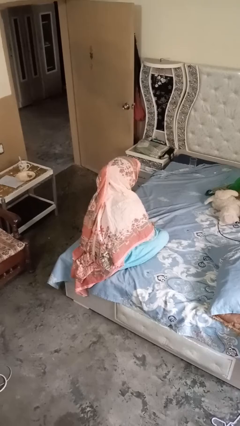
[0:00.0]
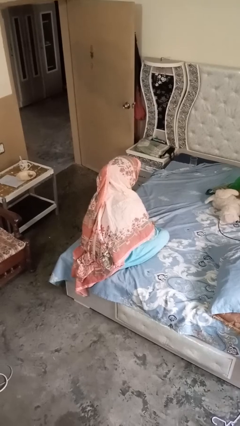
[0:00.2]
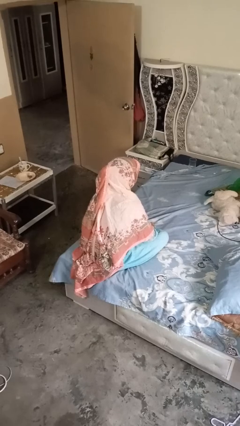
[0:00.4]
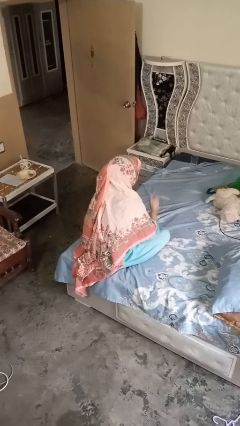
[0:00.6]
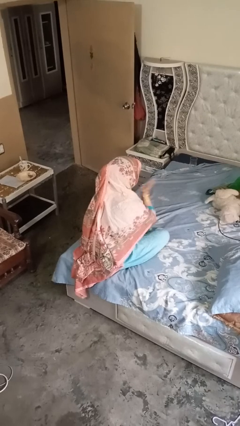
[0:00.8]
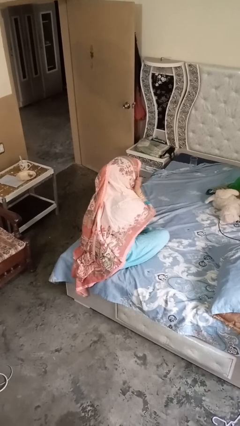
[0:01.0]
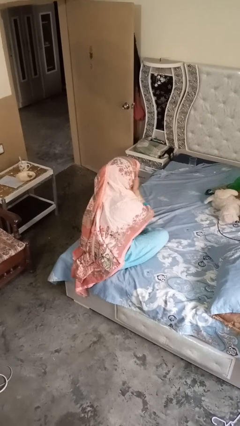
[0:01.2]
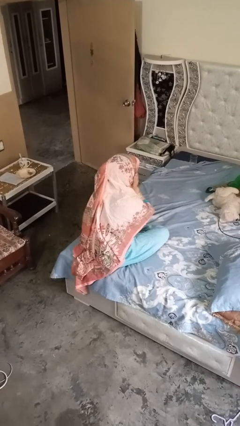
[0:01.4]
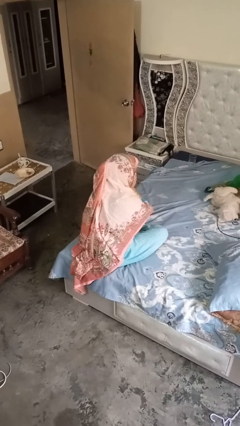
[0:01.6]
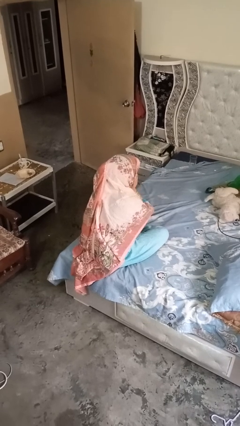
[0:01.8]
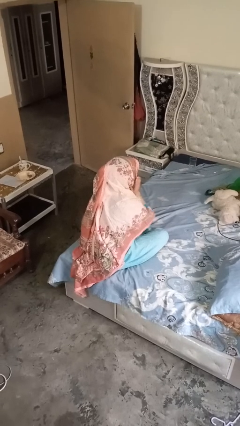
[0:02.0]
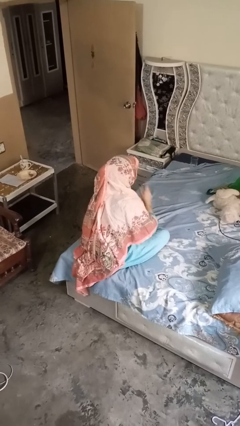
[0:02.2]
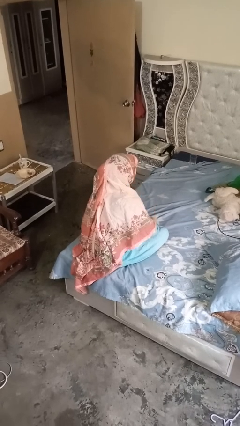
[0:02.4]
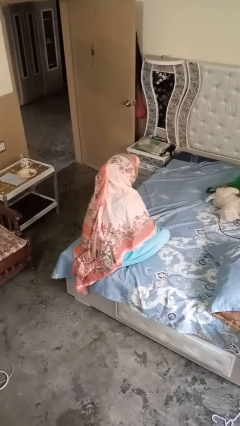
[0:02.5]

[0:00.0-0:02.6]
person strokes chin

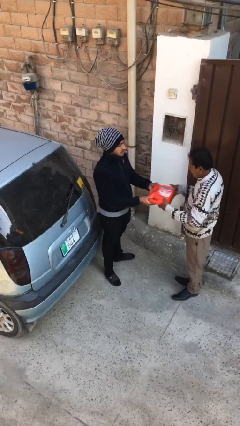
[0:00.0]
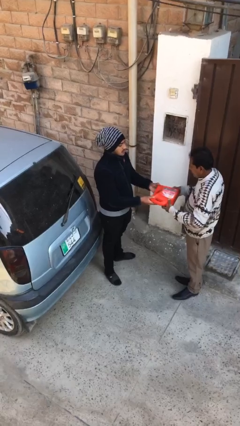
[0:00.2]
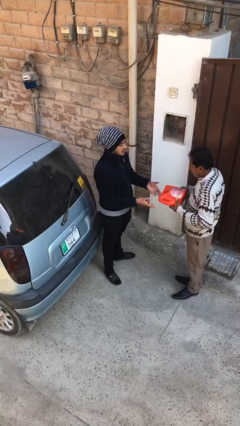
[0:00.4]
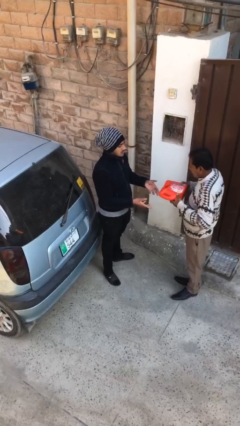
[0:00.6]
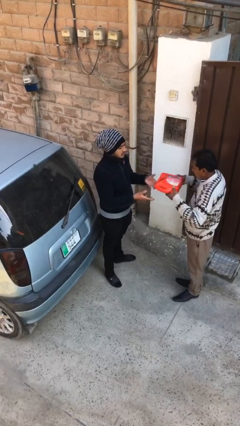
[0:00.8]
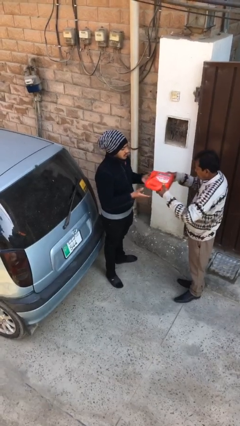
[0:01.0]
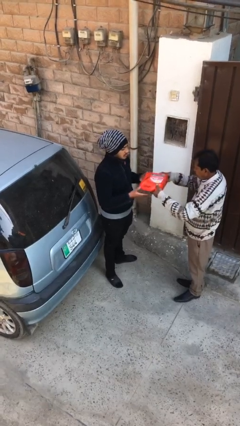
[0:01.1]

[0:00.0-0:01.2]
person transfers object to person

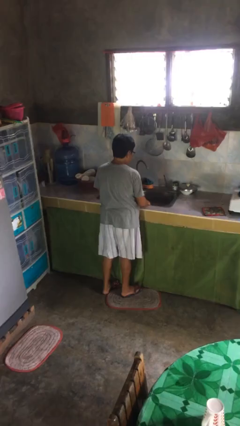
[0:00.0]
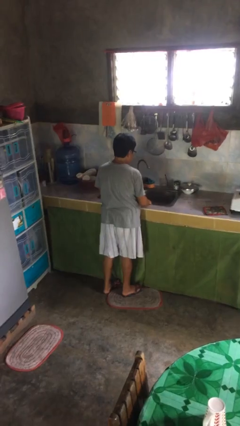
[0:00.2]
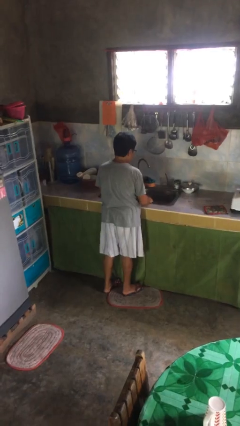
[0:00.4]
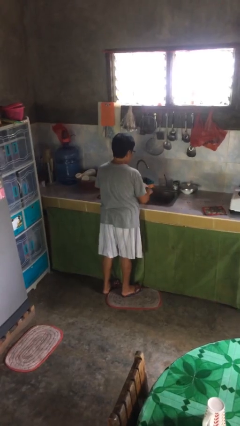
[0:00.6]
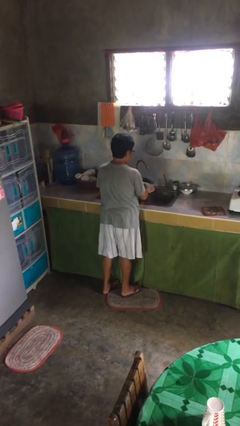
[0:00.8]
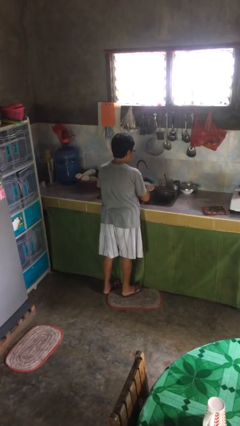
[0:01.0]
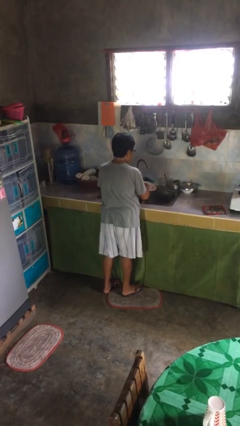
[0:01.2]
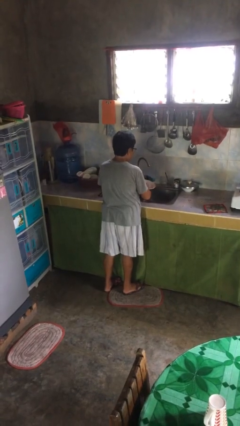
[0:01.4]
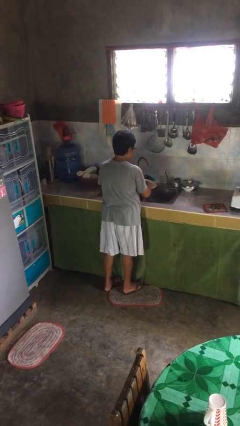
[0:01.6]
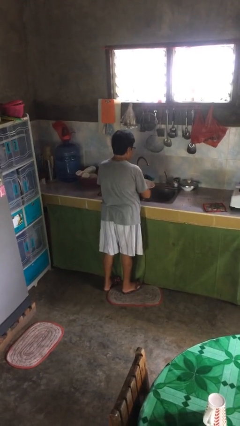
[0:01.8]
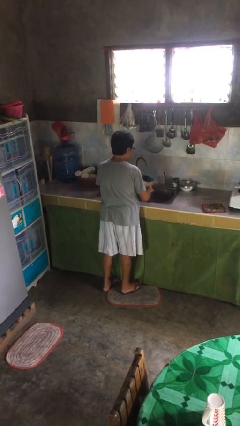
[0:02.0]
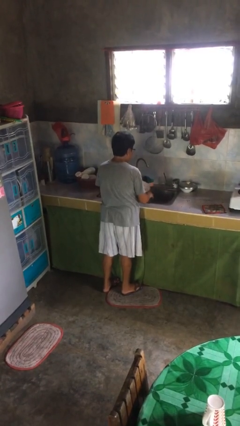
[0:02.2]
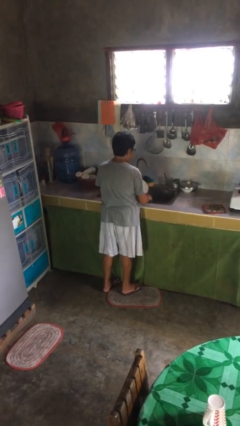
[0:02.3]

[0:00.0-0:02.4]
person washes dish

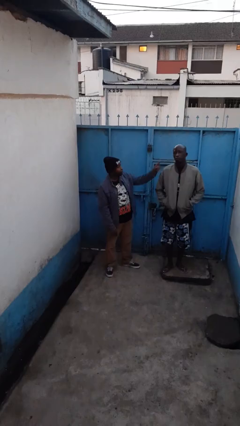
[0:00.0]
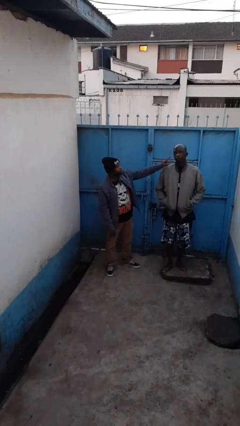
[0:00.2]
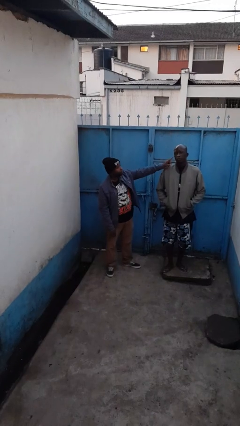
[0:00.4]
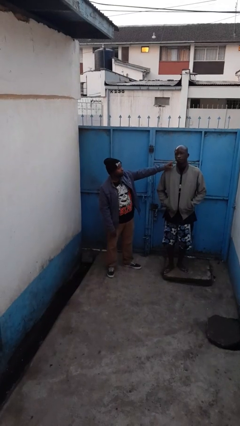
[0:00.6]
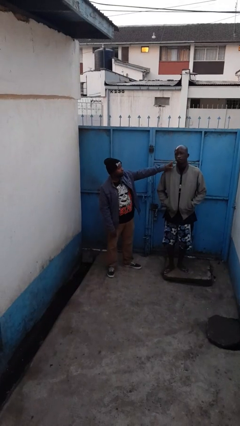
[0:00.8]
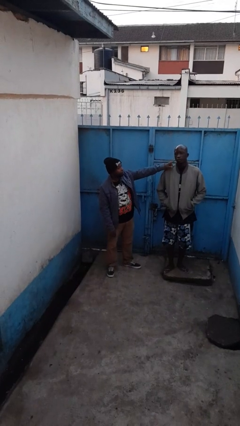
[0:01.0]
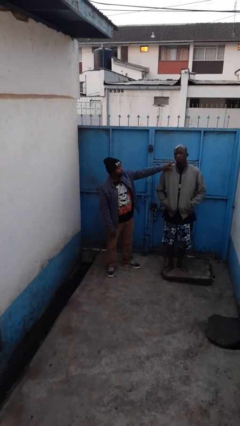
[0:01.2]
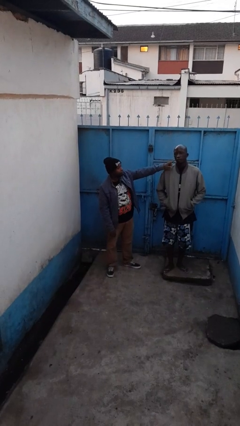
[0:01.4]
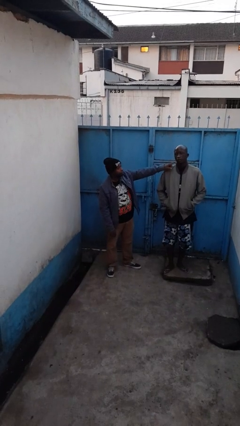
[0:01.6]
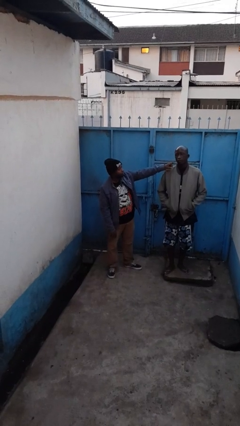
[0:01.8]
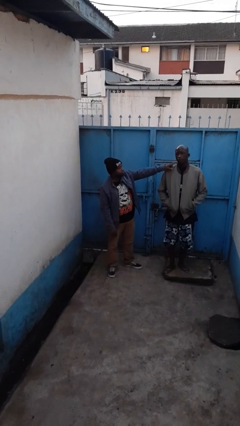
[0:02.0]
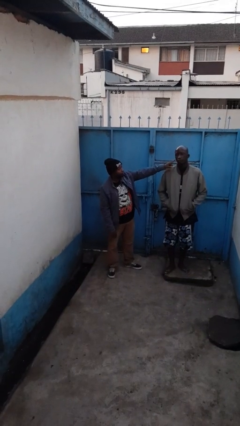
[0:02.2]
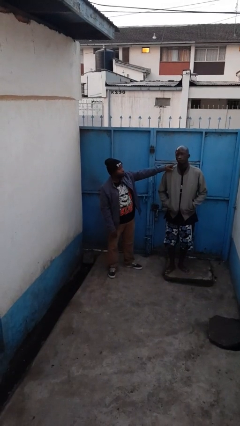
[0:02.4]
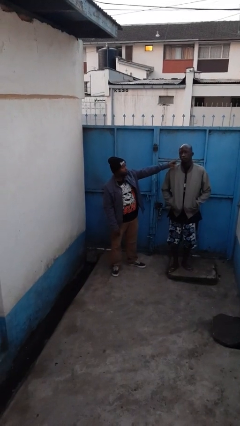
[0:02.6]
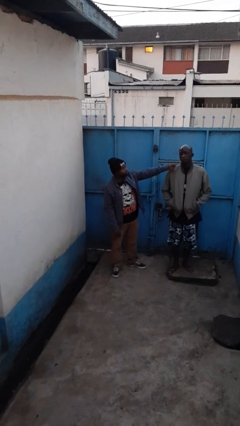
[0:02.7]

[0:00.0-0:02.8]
person touches face of person

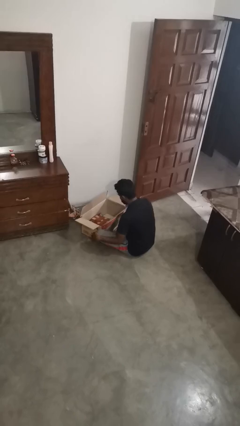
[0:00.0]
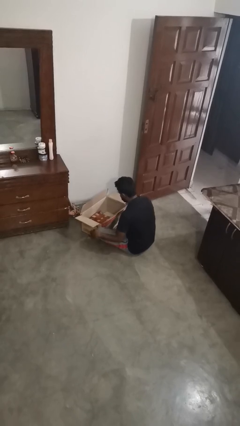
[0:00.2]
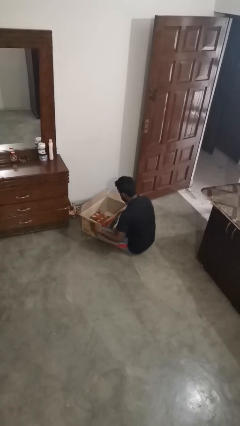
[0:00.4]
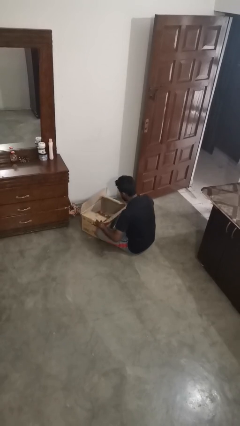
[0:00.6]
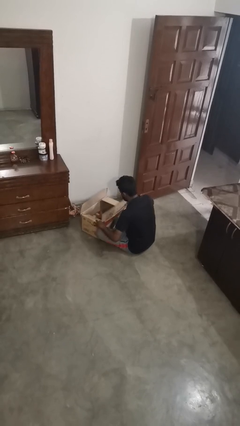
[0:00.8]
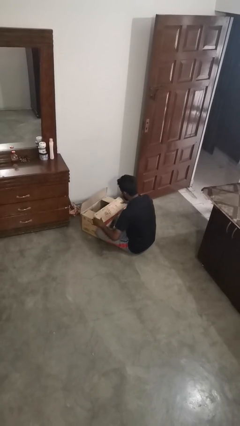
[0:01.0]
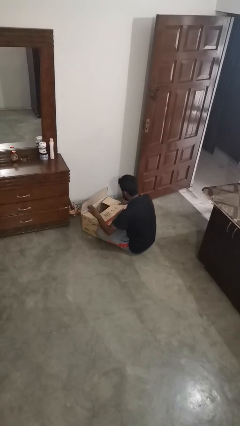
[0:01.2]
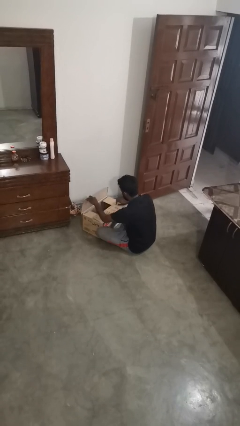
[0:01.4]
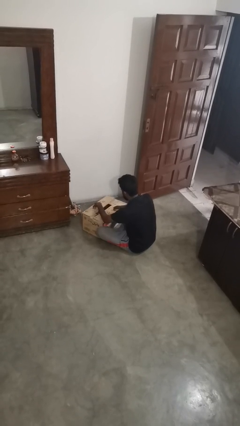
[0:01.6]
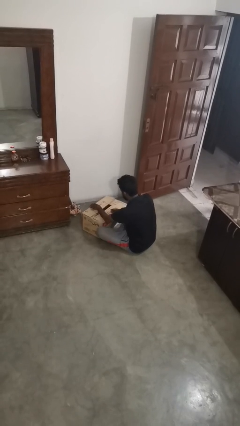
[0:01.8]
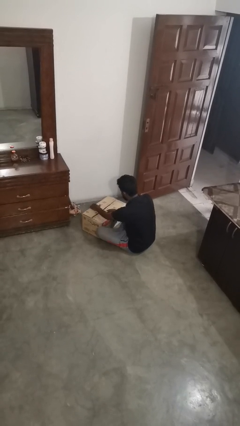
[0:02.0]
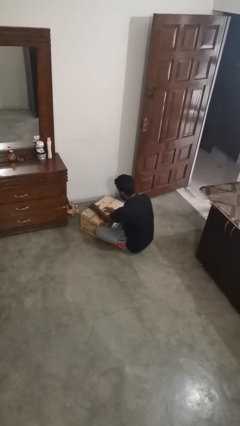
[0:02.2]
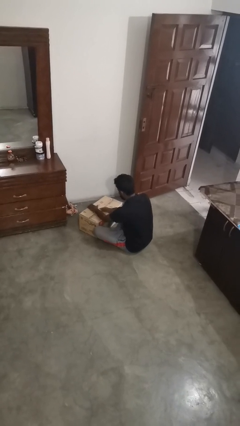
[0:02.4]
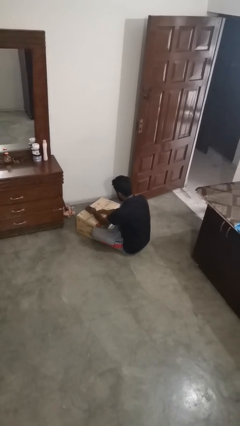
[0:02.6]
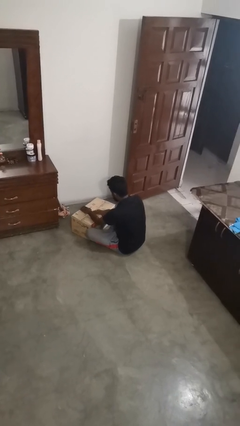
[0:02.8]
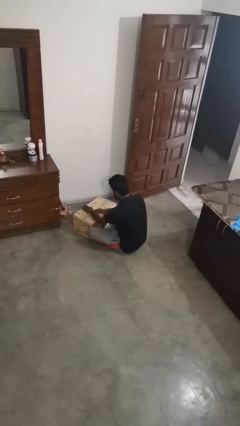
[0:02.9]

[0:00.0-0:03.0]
person closes box

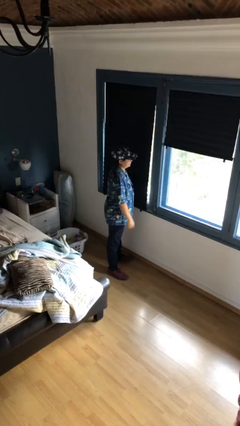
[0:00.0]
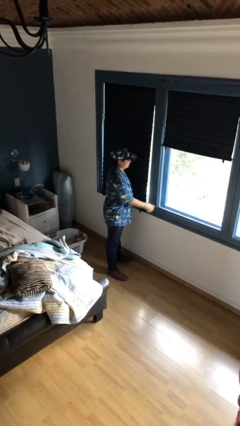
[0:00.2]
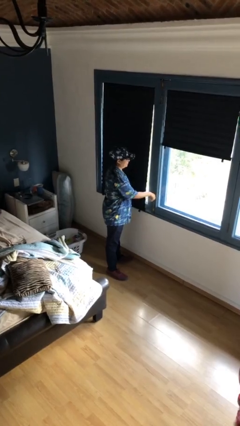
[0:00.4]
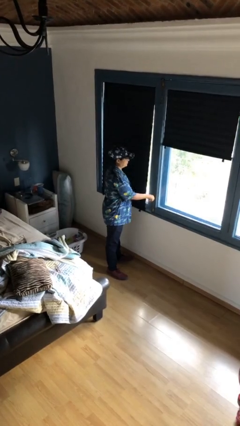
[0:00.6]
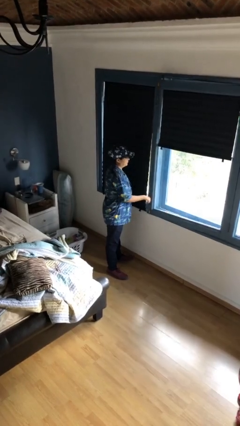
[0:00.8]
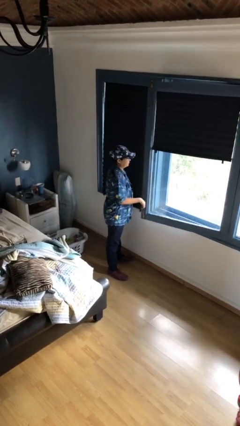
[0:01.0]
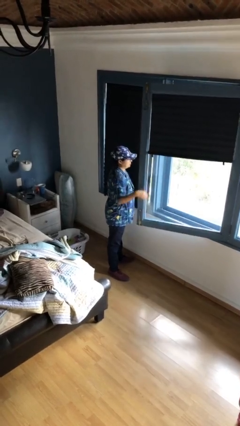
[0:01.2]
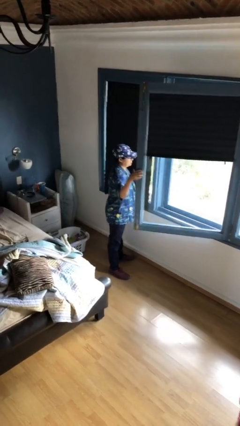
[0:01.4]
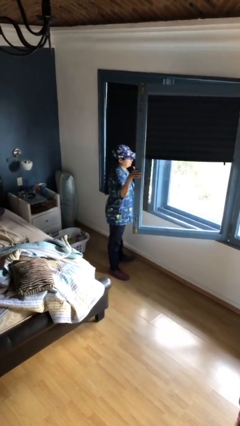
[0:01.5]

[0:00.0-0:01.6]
person opens home window

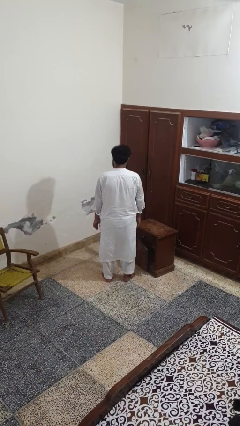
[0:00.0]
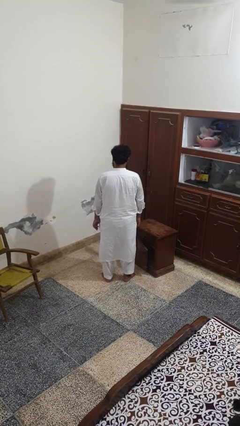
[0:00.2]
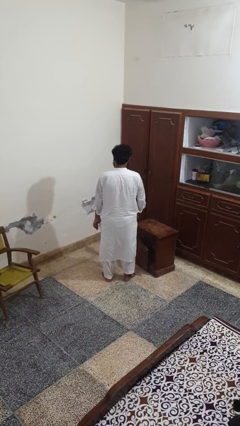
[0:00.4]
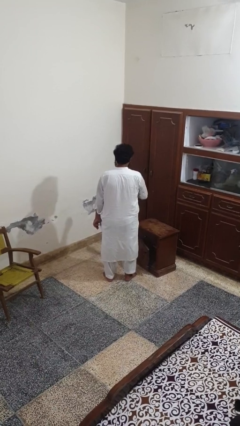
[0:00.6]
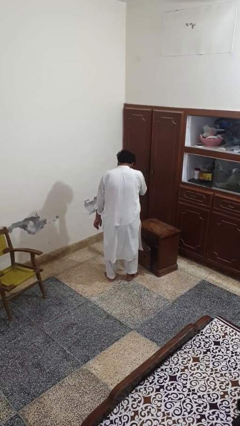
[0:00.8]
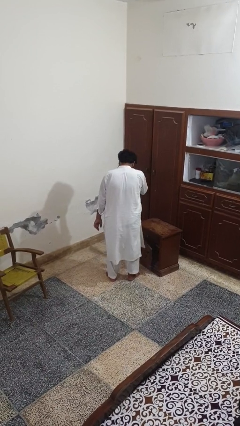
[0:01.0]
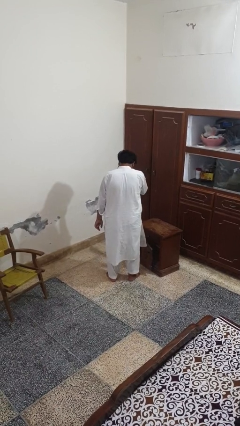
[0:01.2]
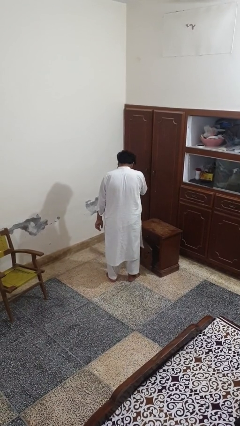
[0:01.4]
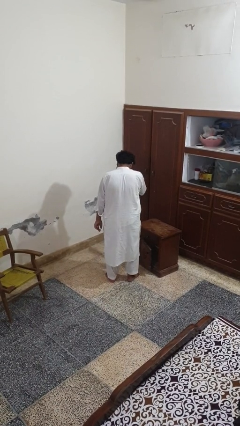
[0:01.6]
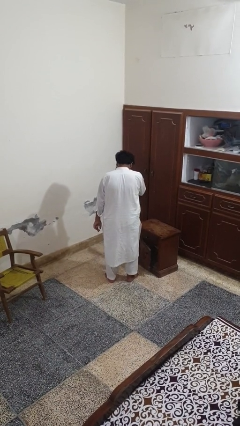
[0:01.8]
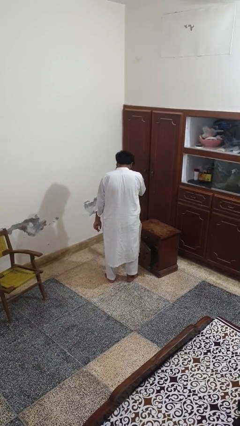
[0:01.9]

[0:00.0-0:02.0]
person sneezes into hand

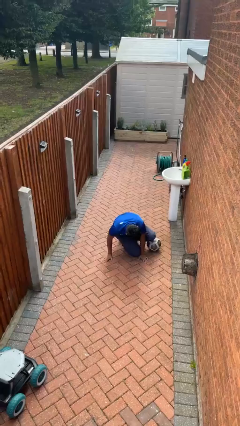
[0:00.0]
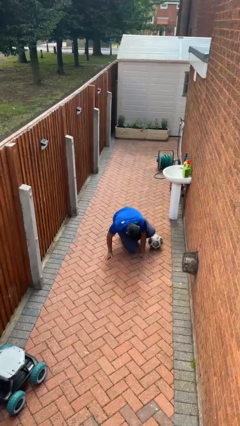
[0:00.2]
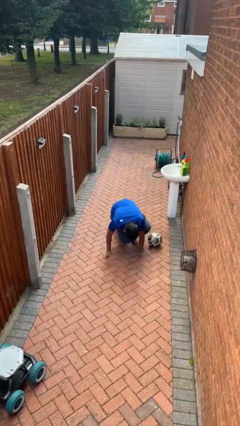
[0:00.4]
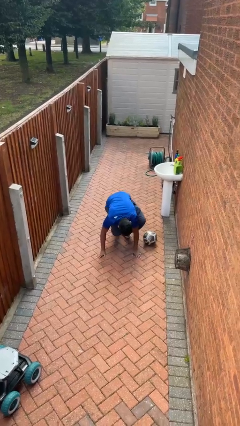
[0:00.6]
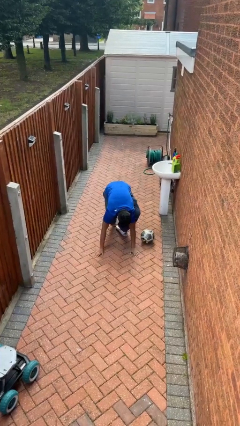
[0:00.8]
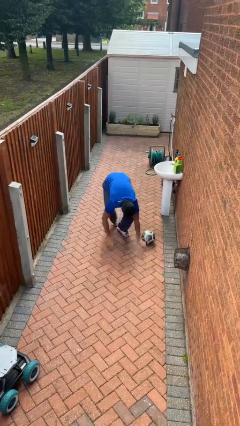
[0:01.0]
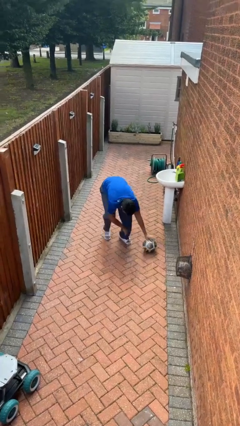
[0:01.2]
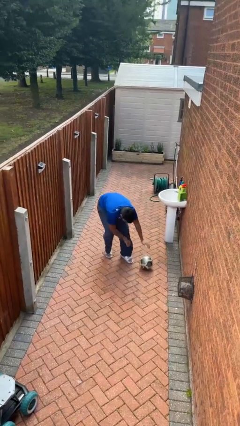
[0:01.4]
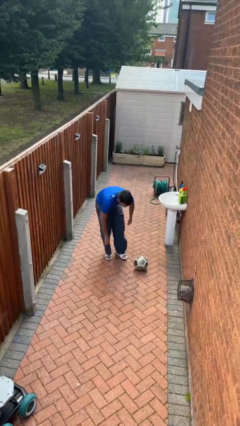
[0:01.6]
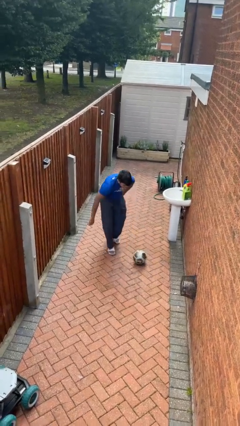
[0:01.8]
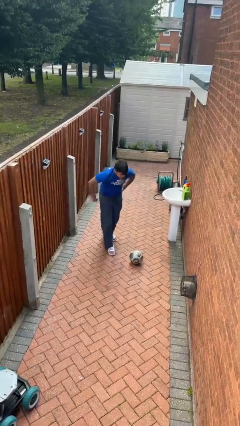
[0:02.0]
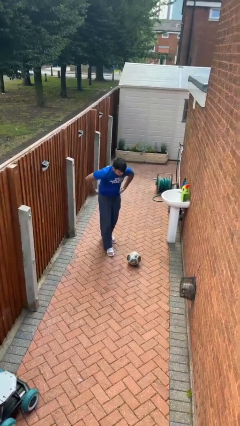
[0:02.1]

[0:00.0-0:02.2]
person stands up from floor
